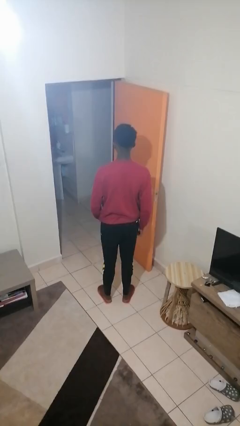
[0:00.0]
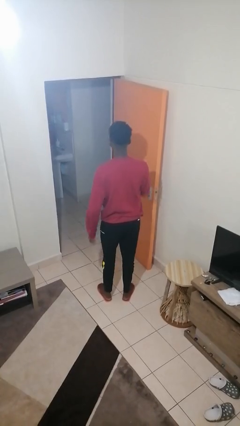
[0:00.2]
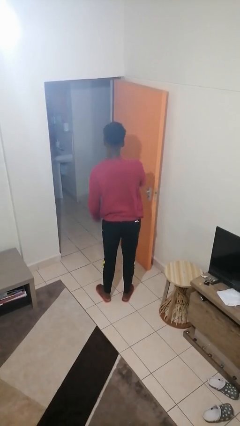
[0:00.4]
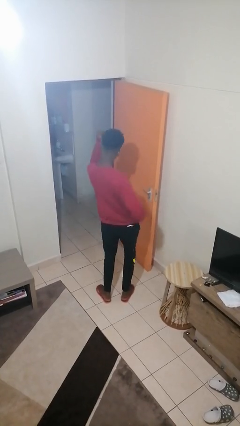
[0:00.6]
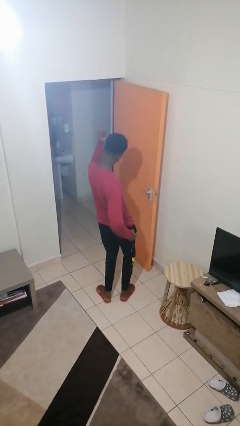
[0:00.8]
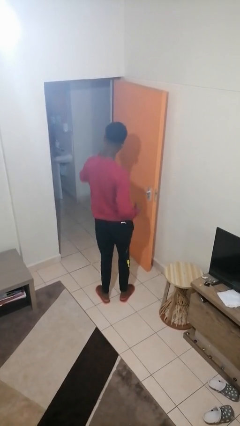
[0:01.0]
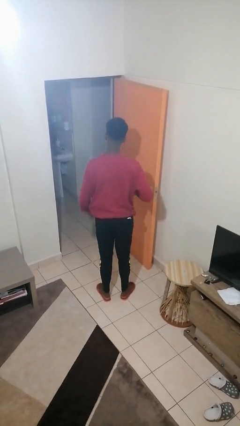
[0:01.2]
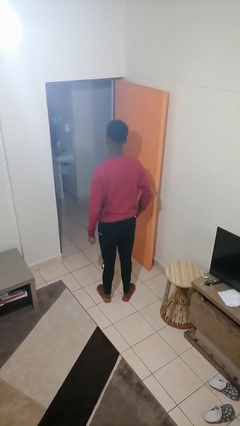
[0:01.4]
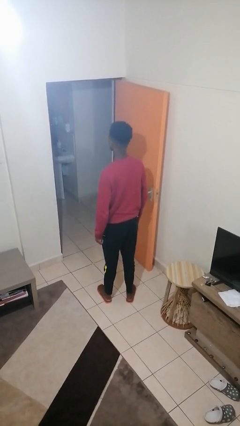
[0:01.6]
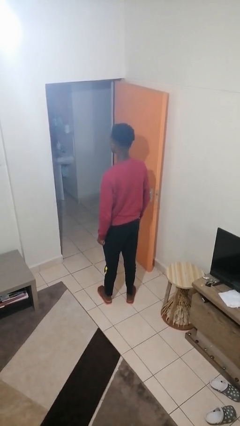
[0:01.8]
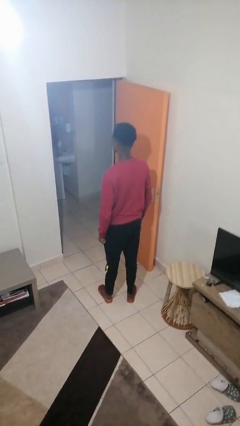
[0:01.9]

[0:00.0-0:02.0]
person punches

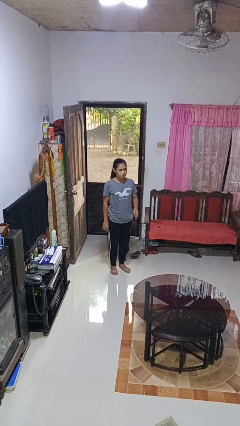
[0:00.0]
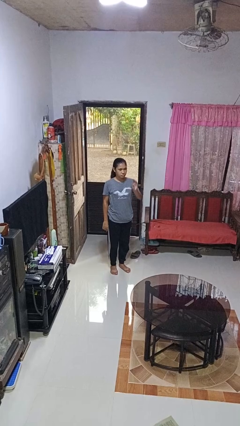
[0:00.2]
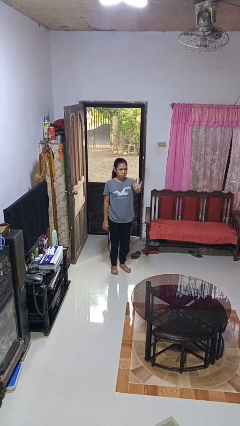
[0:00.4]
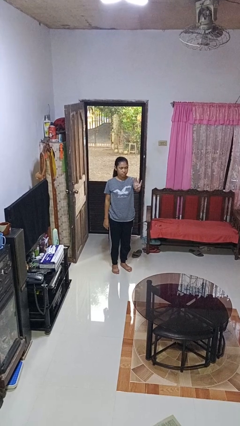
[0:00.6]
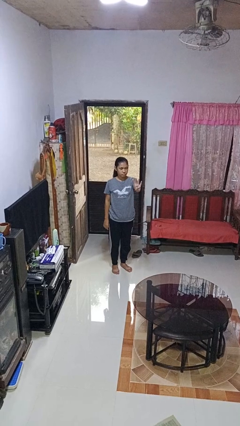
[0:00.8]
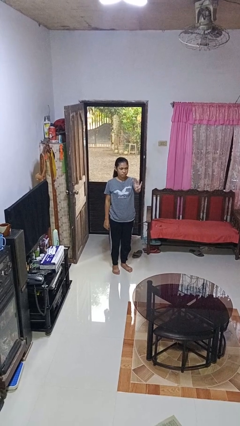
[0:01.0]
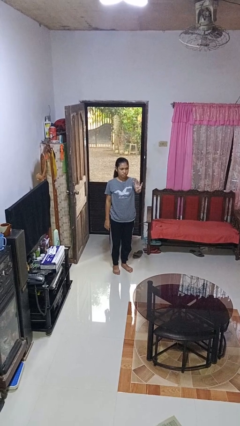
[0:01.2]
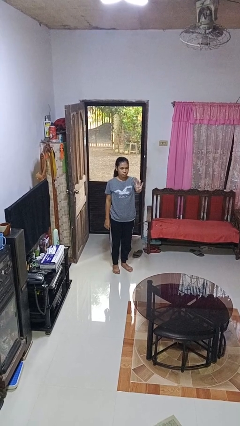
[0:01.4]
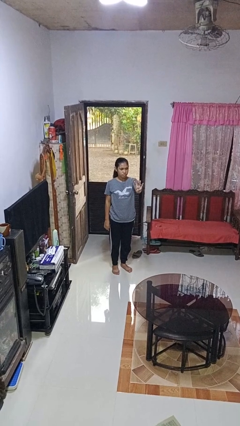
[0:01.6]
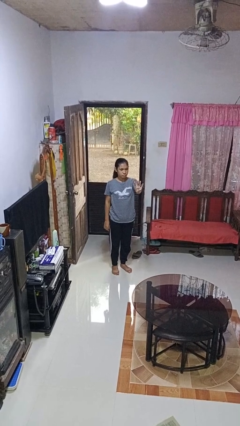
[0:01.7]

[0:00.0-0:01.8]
person gestures number four

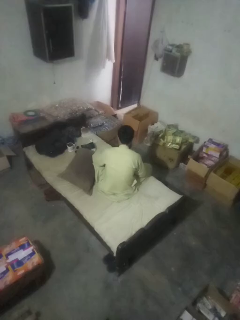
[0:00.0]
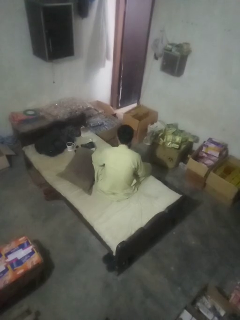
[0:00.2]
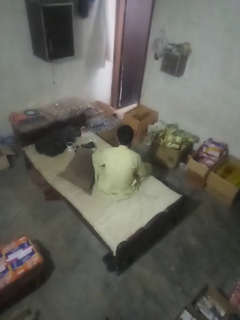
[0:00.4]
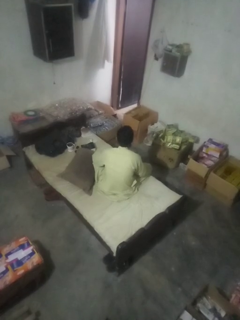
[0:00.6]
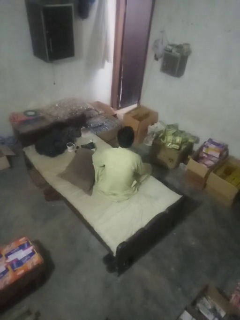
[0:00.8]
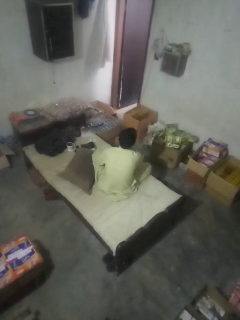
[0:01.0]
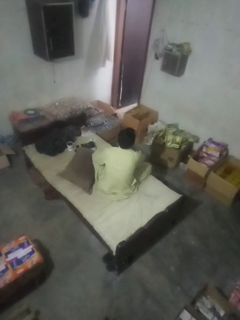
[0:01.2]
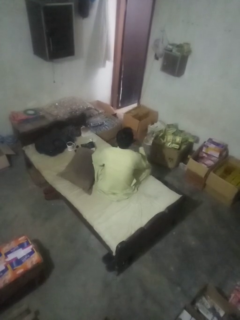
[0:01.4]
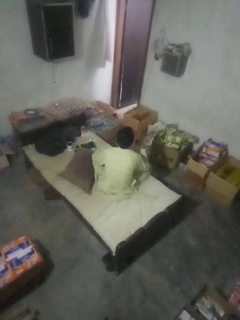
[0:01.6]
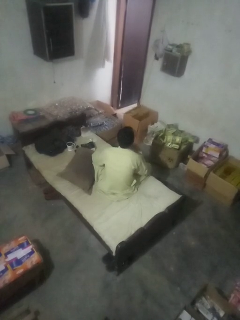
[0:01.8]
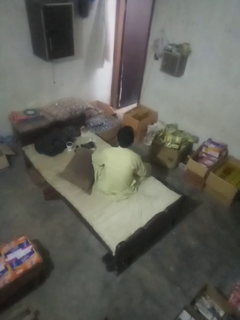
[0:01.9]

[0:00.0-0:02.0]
person gestures cut

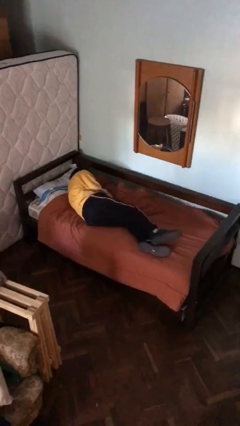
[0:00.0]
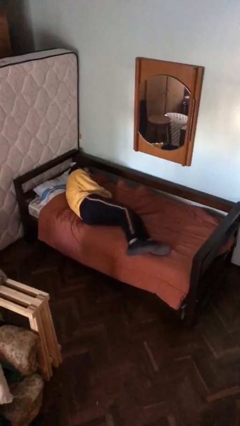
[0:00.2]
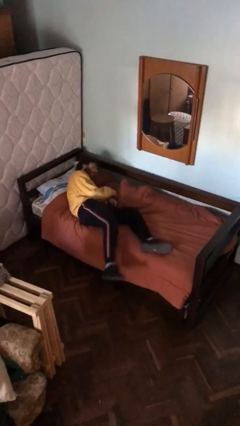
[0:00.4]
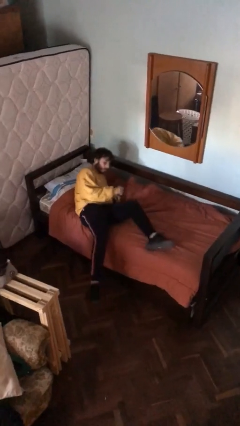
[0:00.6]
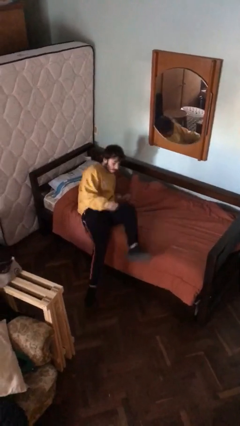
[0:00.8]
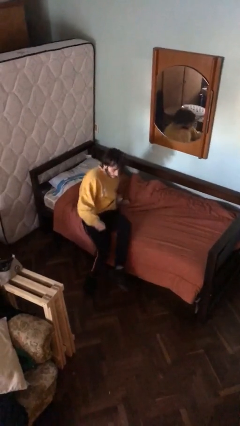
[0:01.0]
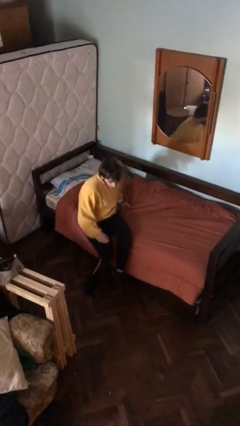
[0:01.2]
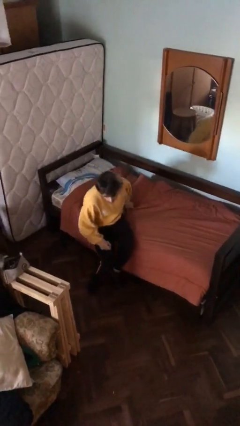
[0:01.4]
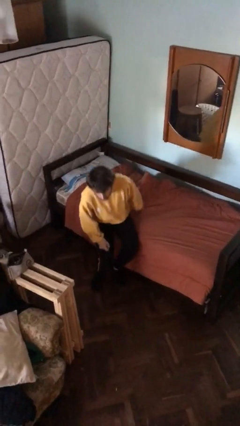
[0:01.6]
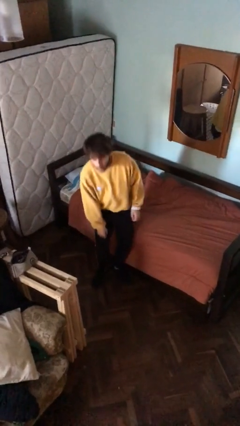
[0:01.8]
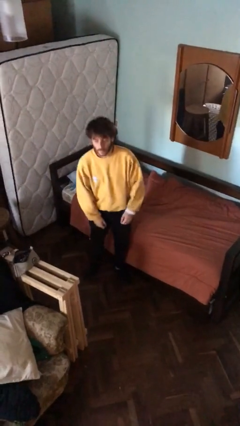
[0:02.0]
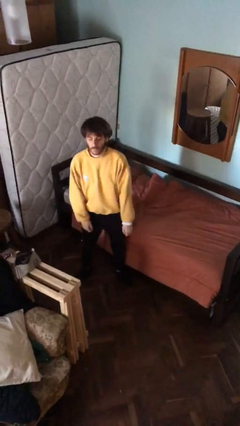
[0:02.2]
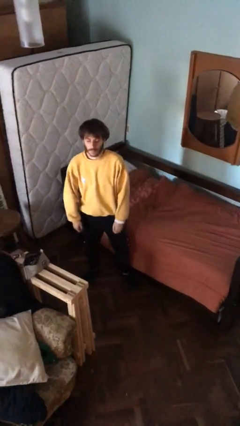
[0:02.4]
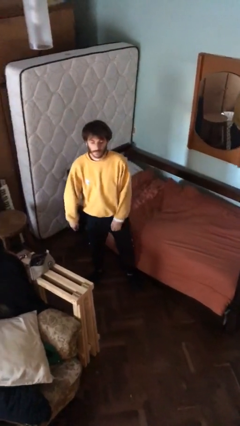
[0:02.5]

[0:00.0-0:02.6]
person stands up

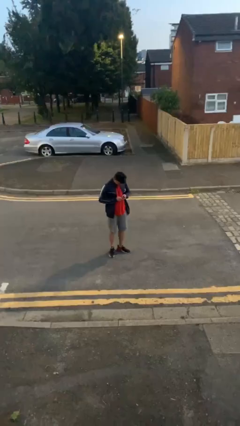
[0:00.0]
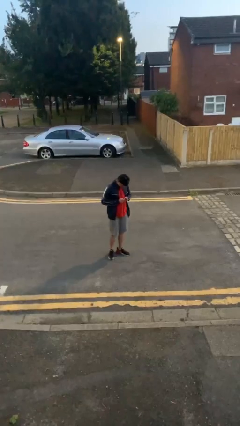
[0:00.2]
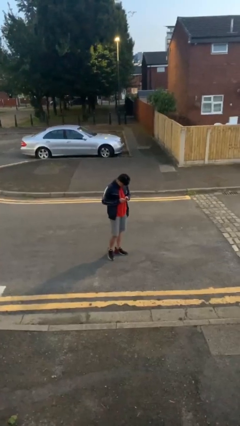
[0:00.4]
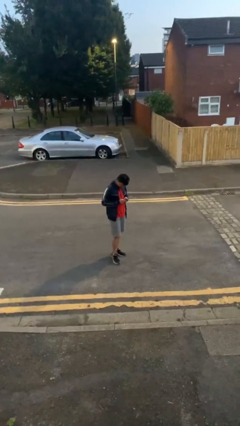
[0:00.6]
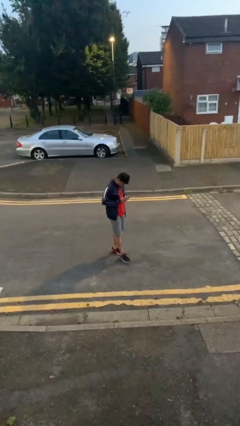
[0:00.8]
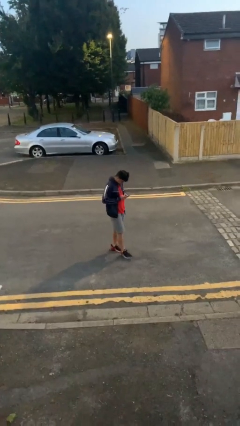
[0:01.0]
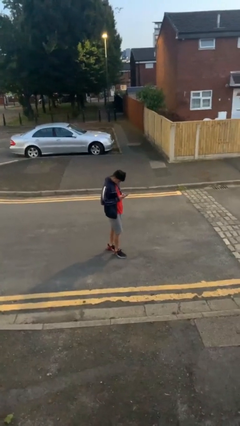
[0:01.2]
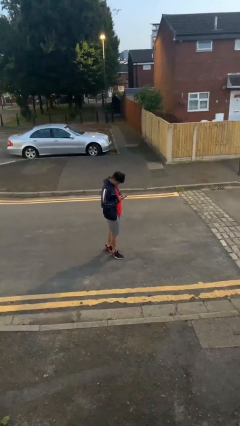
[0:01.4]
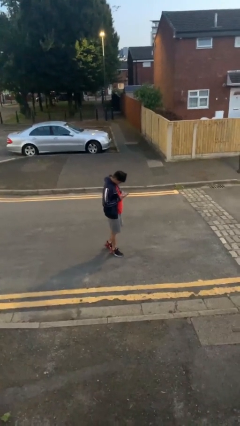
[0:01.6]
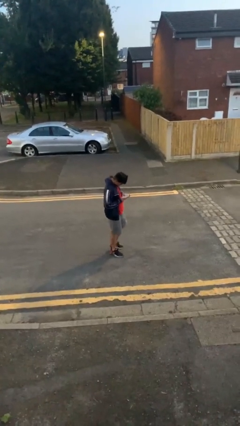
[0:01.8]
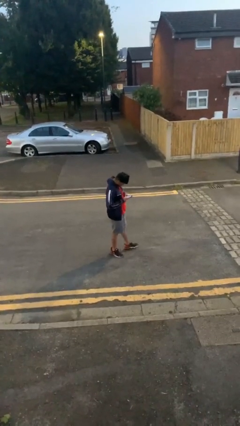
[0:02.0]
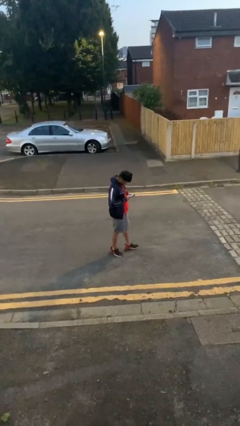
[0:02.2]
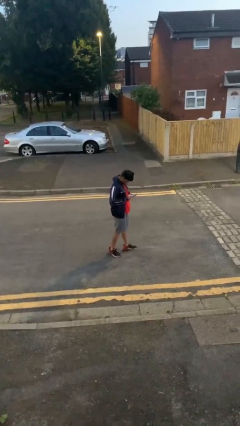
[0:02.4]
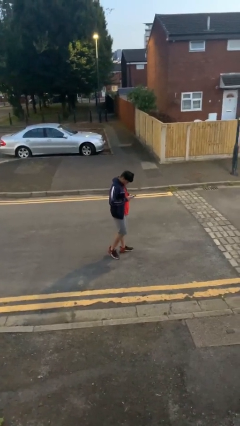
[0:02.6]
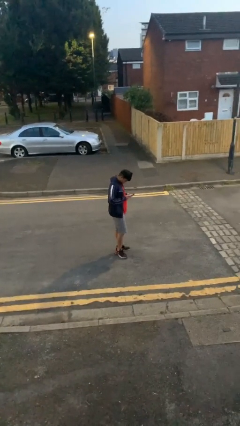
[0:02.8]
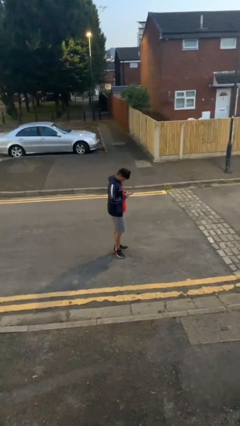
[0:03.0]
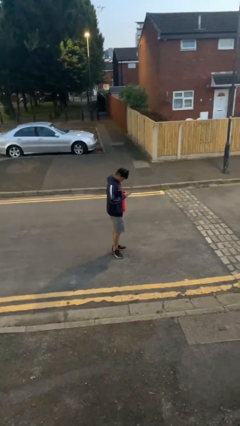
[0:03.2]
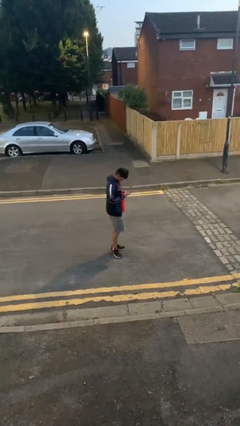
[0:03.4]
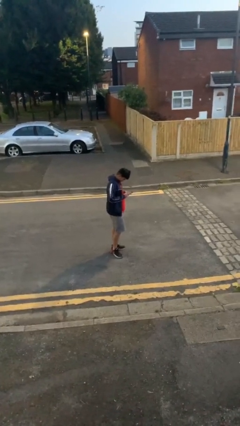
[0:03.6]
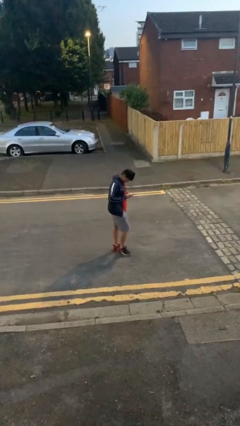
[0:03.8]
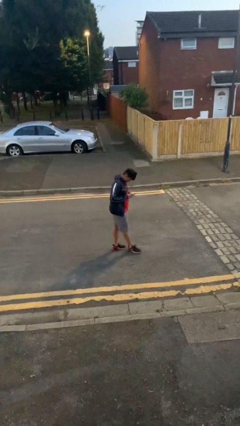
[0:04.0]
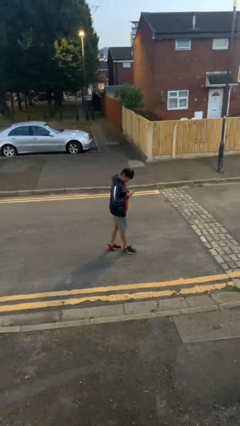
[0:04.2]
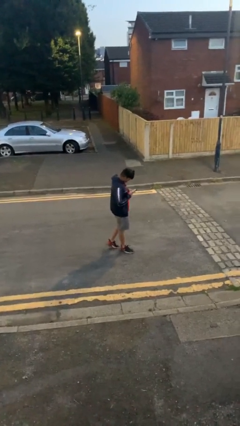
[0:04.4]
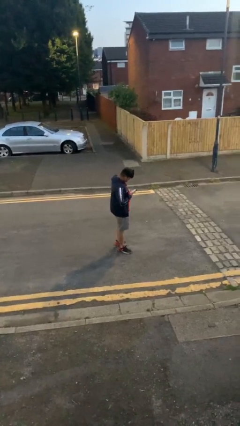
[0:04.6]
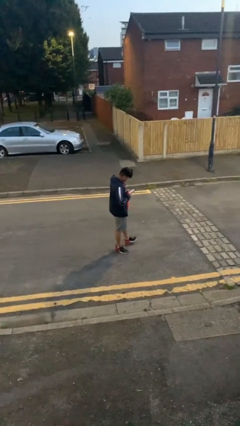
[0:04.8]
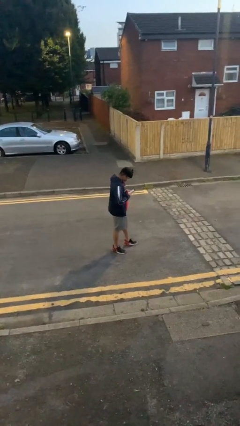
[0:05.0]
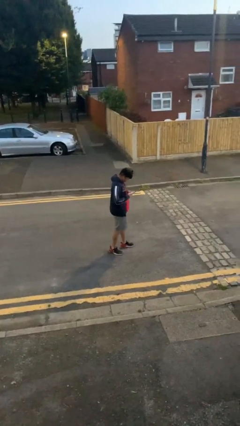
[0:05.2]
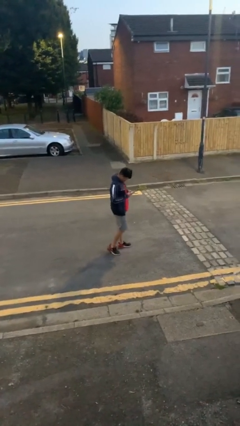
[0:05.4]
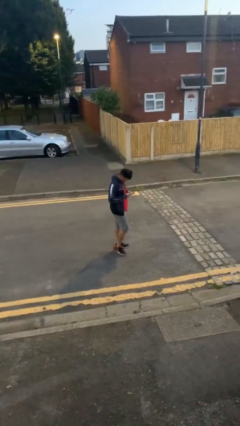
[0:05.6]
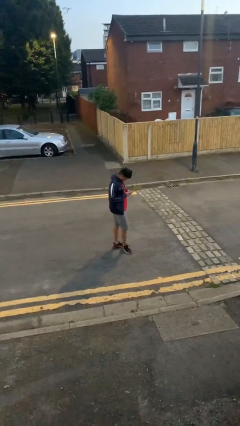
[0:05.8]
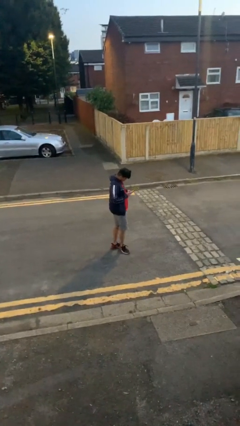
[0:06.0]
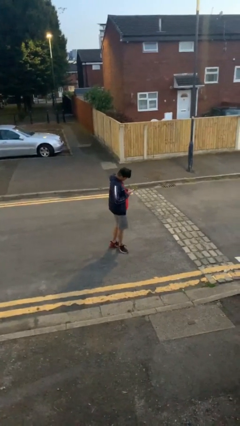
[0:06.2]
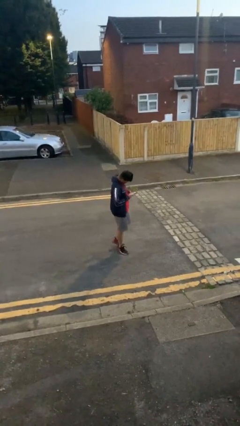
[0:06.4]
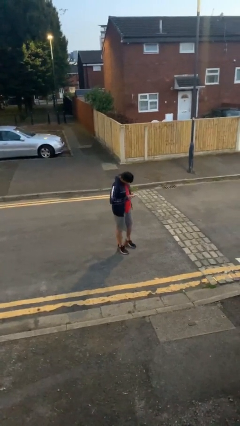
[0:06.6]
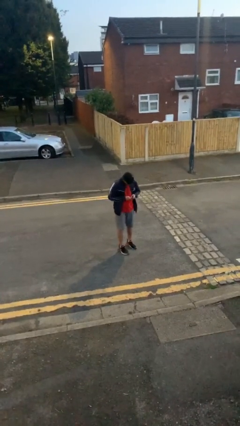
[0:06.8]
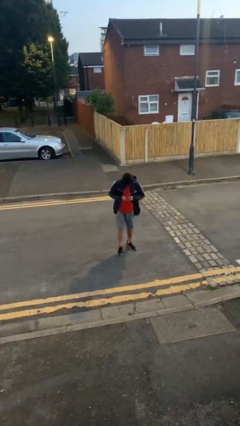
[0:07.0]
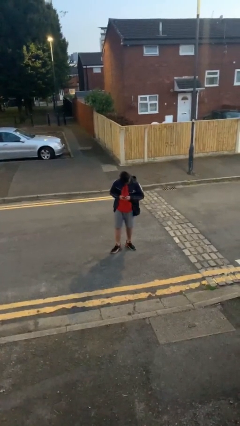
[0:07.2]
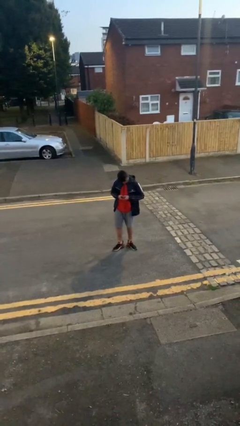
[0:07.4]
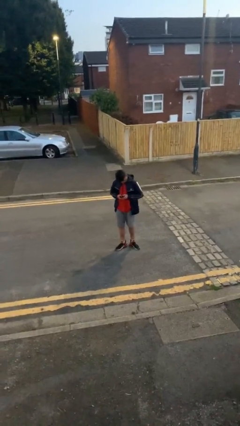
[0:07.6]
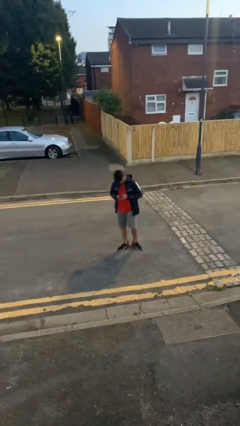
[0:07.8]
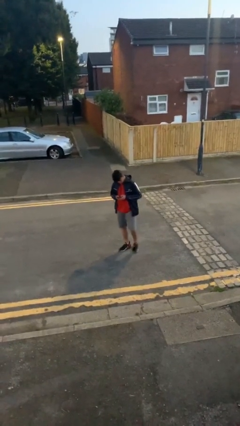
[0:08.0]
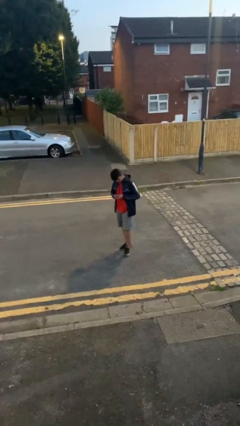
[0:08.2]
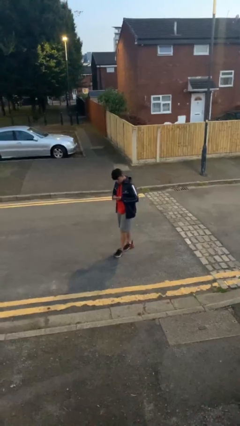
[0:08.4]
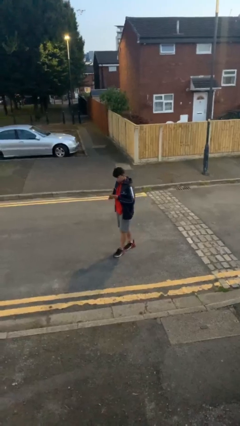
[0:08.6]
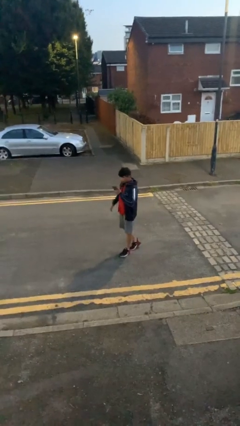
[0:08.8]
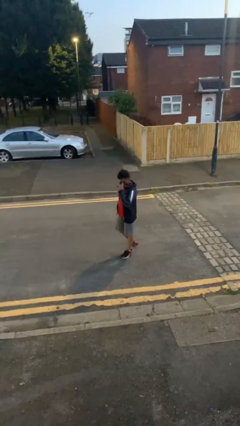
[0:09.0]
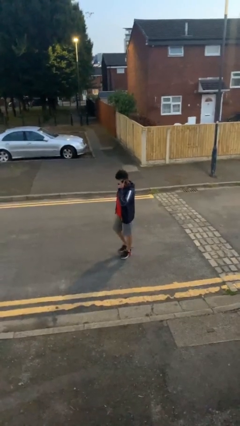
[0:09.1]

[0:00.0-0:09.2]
person texts on phone

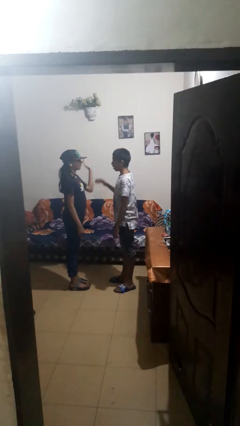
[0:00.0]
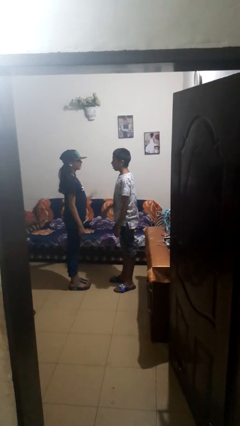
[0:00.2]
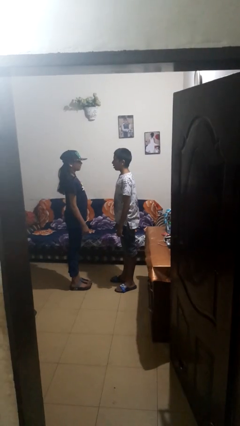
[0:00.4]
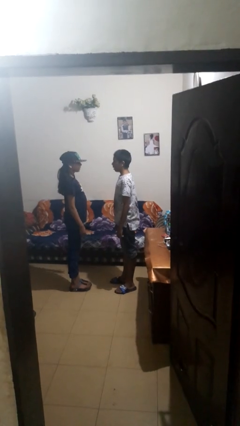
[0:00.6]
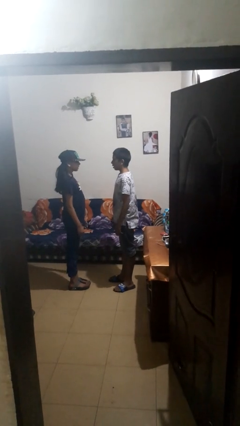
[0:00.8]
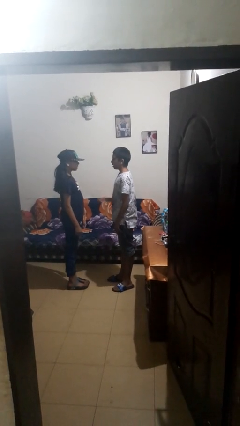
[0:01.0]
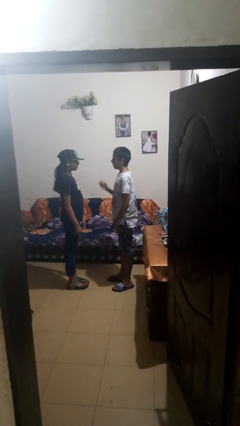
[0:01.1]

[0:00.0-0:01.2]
person highfives hand
